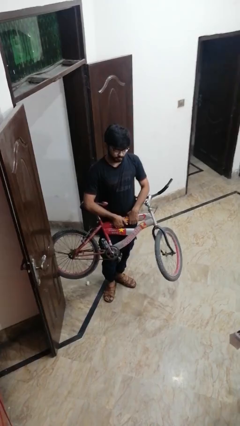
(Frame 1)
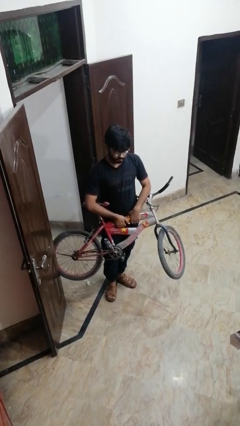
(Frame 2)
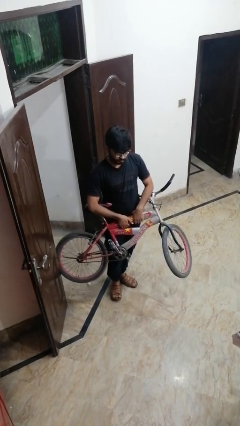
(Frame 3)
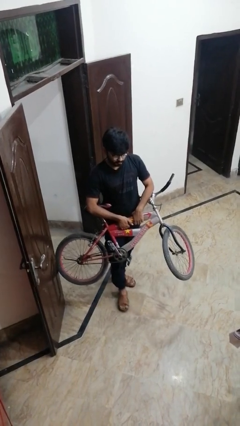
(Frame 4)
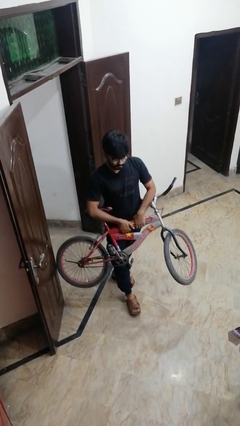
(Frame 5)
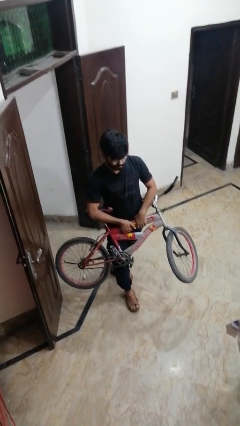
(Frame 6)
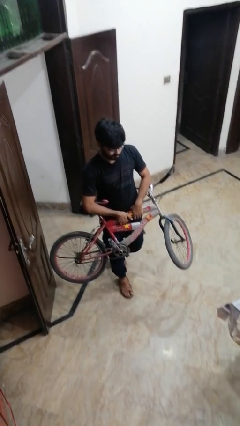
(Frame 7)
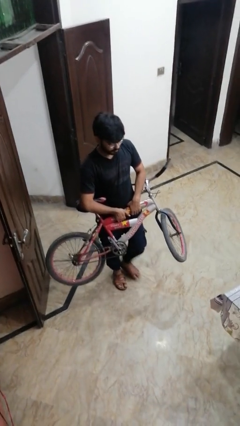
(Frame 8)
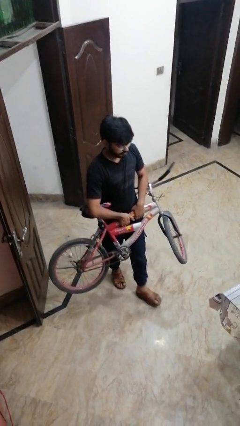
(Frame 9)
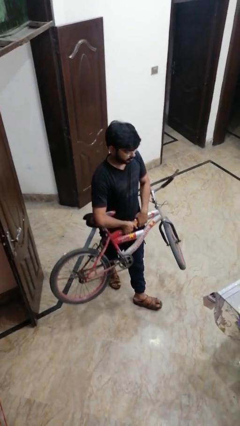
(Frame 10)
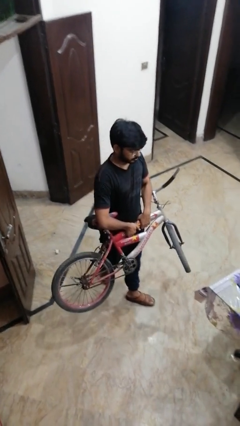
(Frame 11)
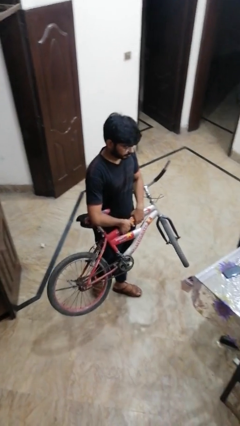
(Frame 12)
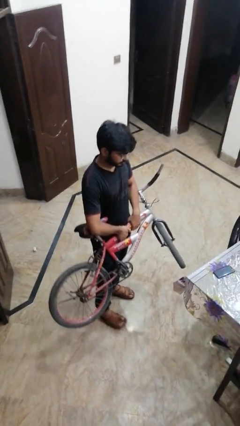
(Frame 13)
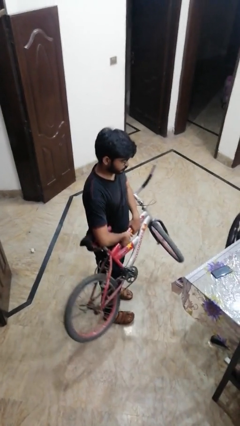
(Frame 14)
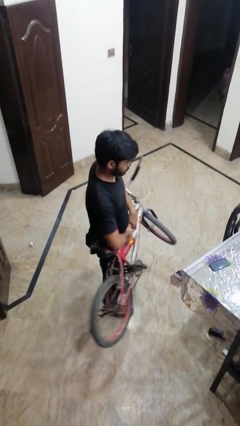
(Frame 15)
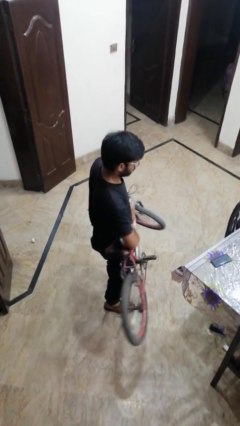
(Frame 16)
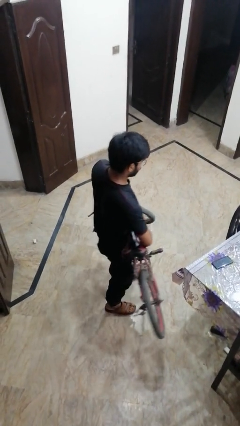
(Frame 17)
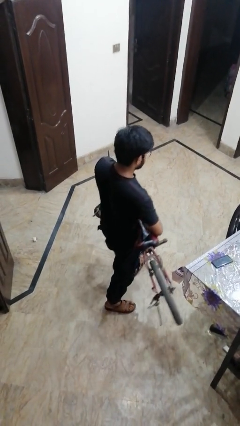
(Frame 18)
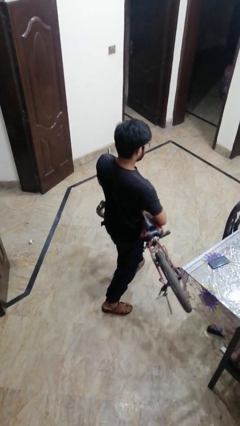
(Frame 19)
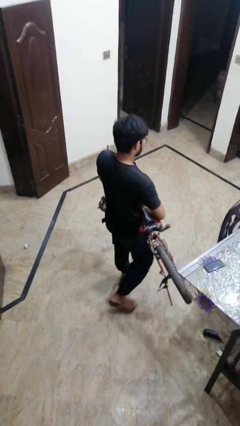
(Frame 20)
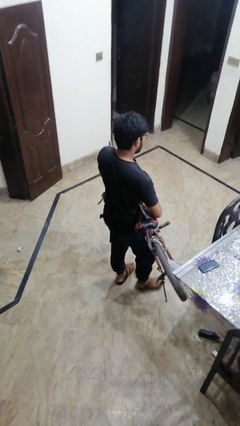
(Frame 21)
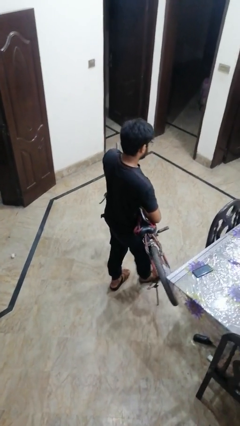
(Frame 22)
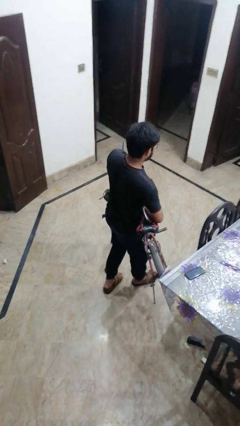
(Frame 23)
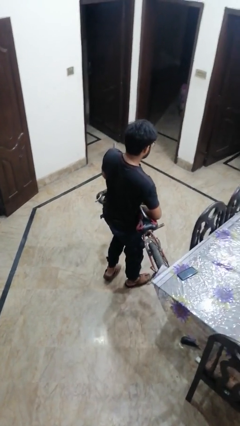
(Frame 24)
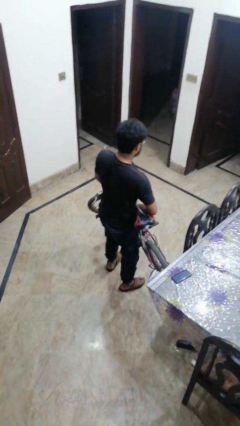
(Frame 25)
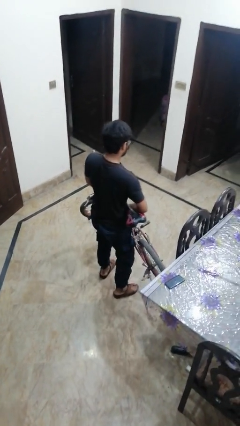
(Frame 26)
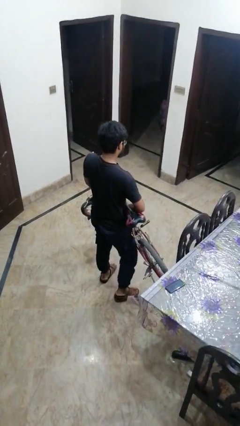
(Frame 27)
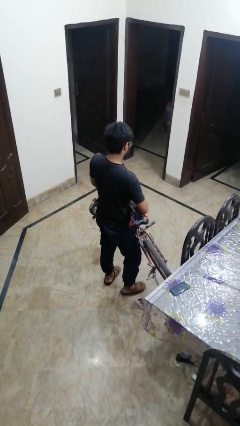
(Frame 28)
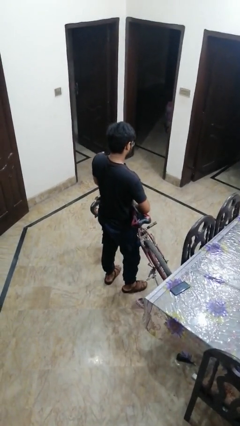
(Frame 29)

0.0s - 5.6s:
person carries bicycle
